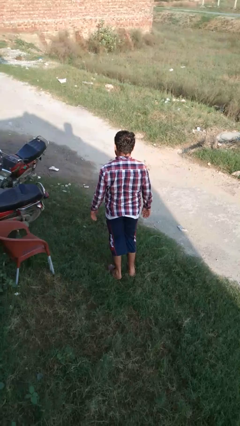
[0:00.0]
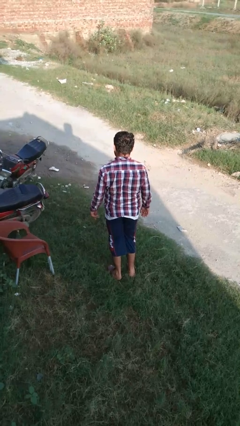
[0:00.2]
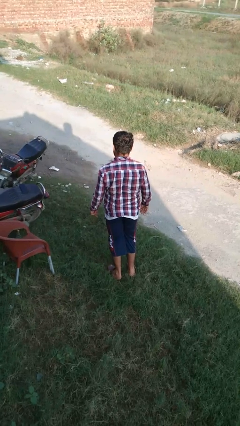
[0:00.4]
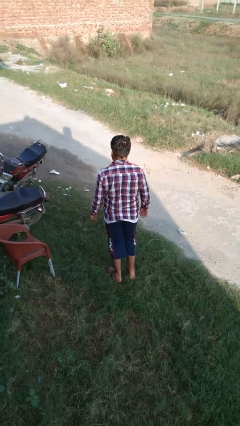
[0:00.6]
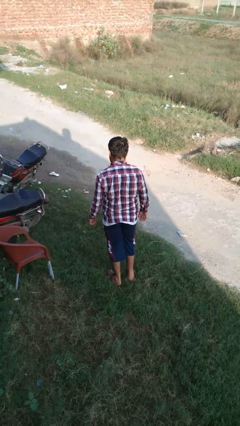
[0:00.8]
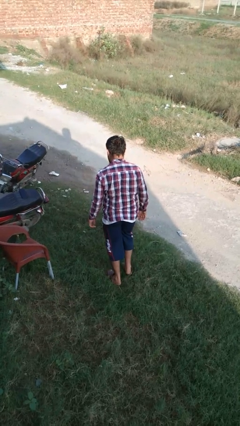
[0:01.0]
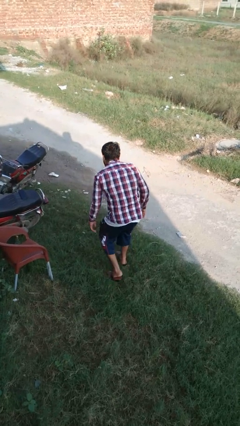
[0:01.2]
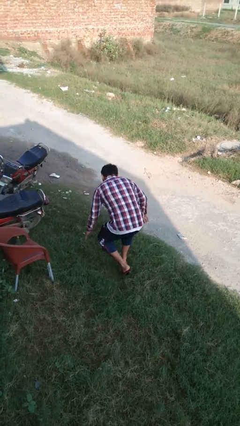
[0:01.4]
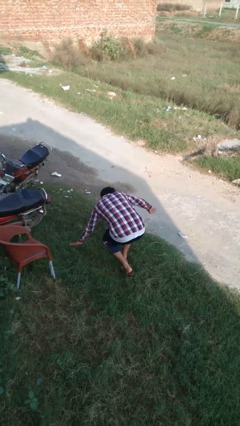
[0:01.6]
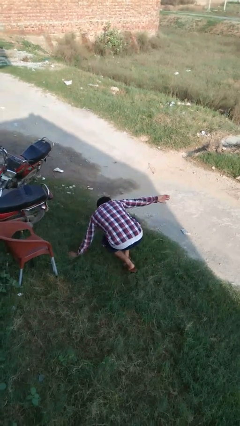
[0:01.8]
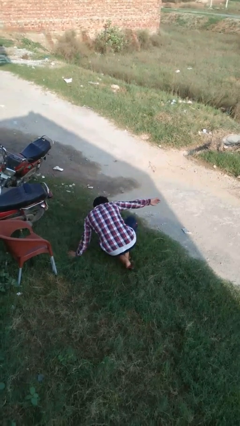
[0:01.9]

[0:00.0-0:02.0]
person trips on object on floor

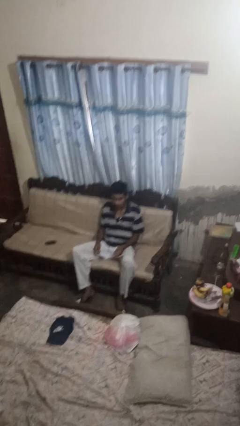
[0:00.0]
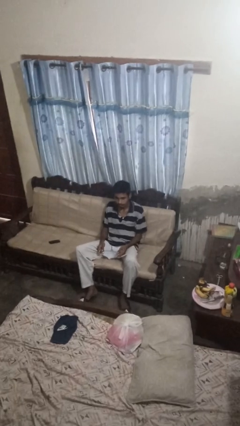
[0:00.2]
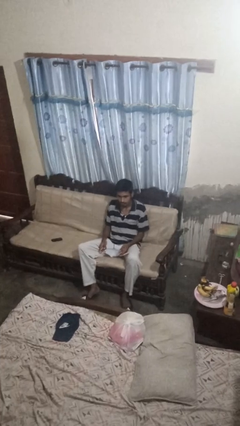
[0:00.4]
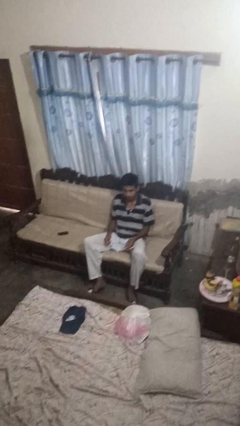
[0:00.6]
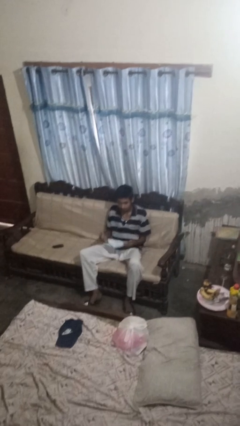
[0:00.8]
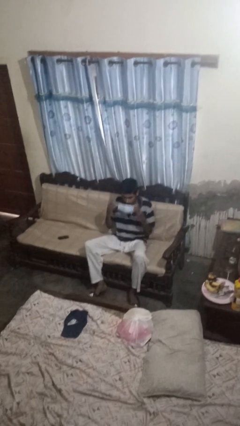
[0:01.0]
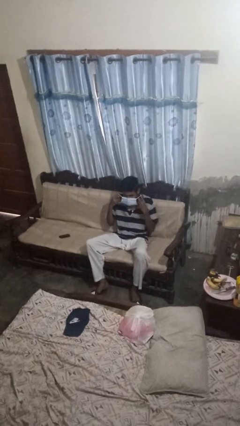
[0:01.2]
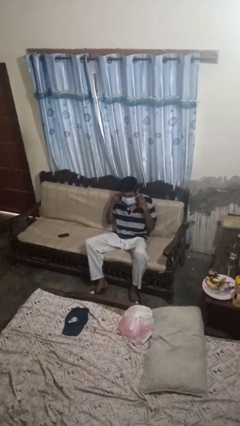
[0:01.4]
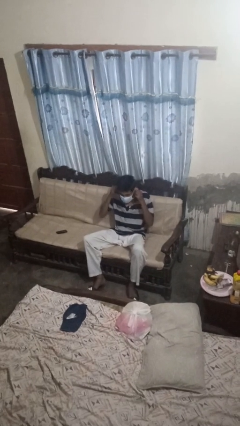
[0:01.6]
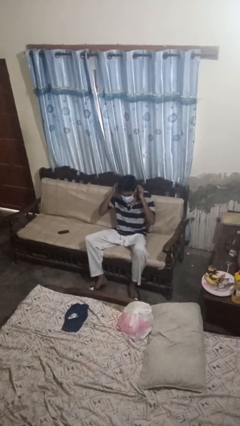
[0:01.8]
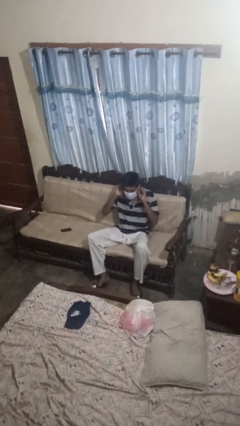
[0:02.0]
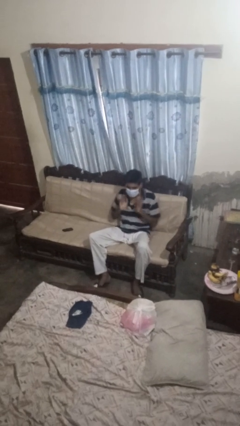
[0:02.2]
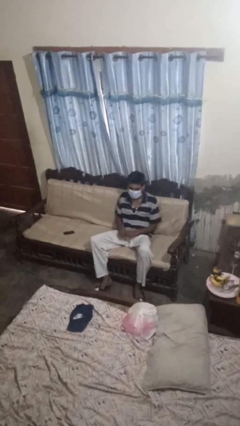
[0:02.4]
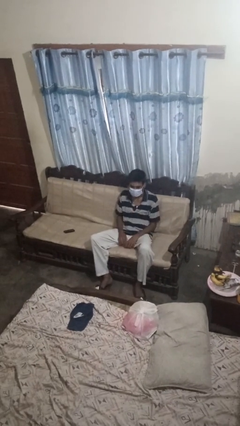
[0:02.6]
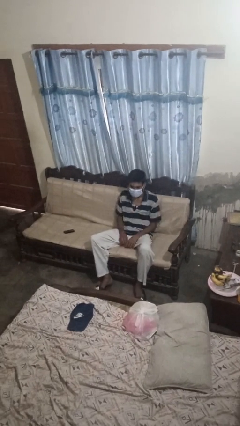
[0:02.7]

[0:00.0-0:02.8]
person puts on facemask

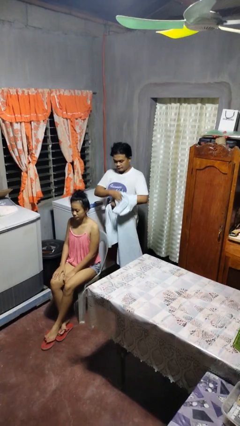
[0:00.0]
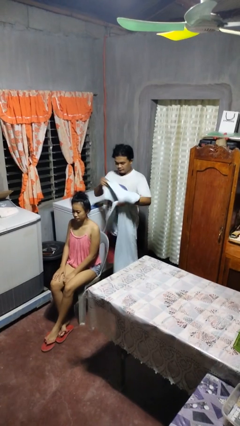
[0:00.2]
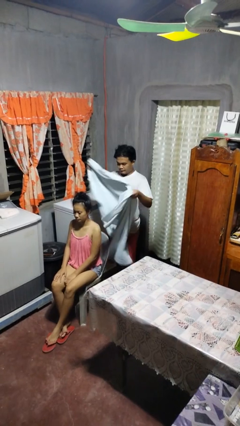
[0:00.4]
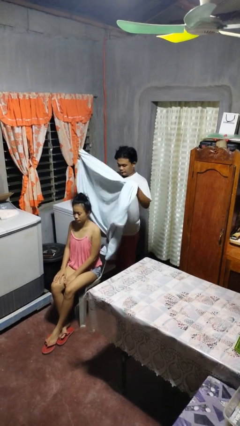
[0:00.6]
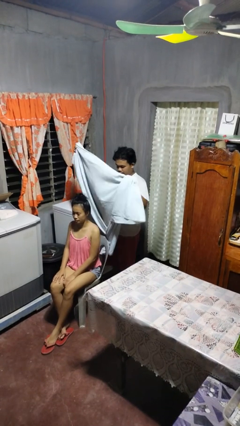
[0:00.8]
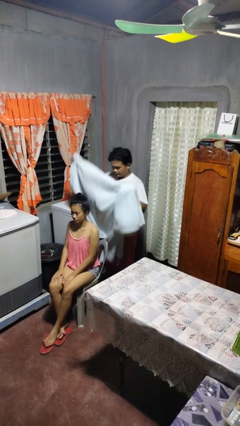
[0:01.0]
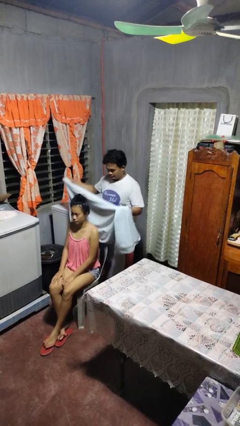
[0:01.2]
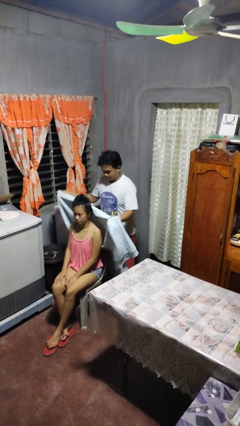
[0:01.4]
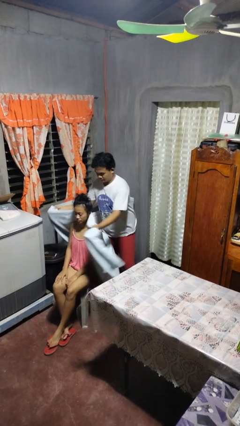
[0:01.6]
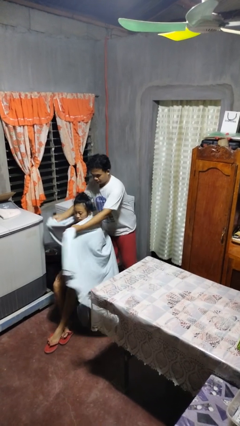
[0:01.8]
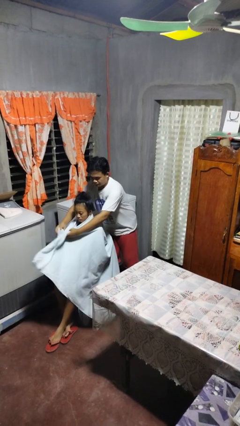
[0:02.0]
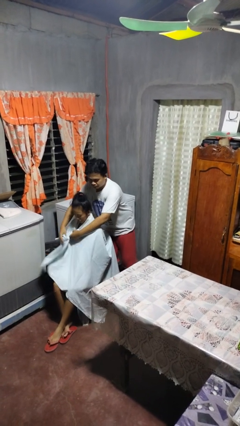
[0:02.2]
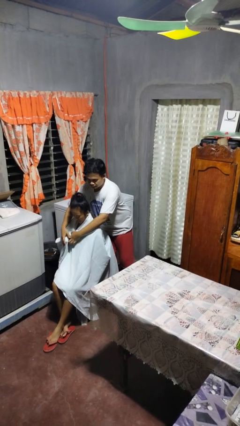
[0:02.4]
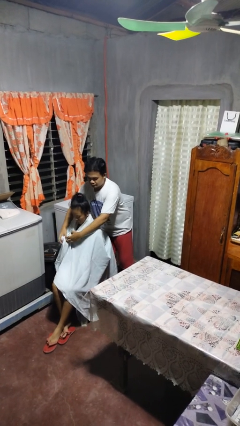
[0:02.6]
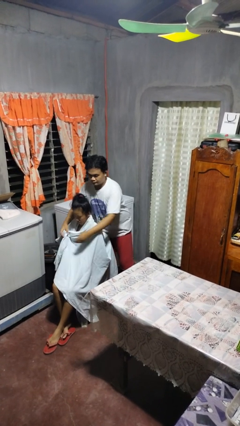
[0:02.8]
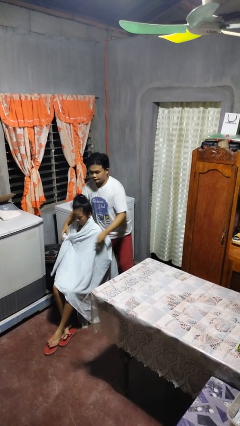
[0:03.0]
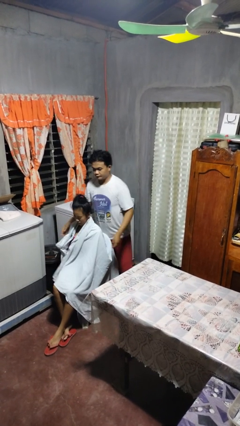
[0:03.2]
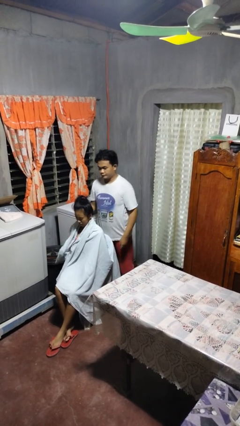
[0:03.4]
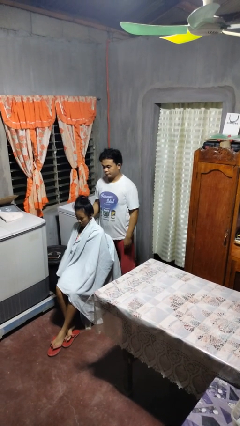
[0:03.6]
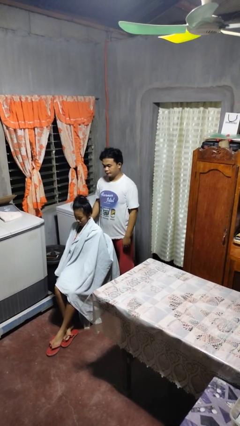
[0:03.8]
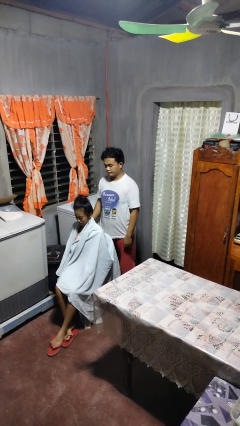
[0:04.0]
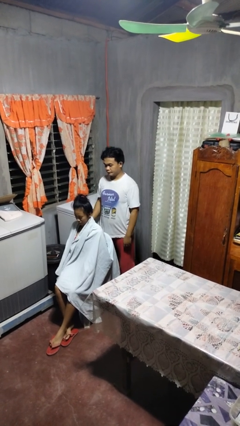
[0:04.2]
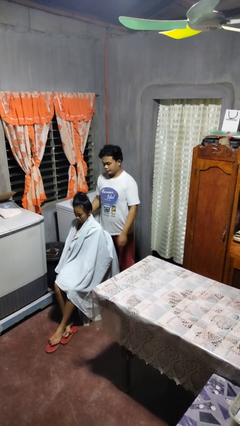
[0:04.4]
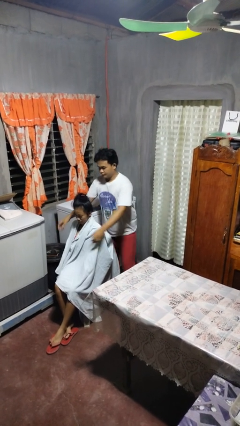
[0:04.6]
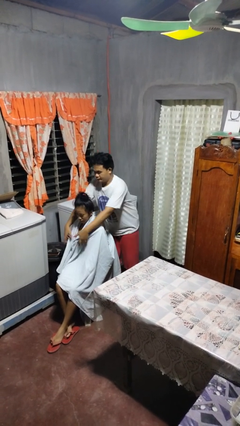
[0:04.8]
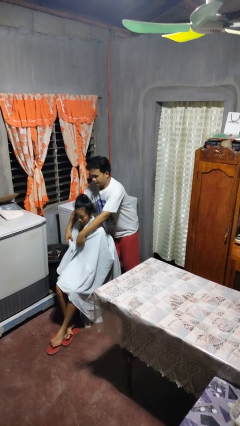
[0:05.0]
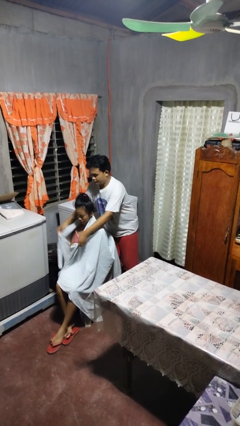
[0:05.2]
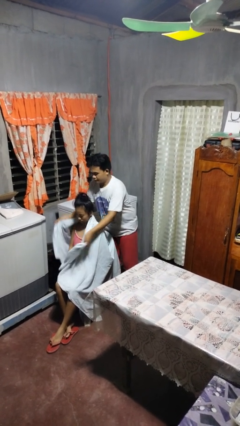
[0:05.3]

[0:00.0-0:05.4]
person covers friend with blanket

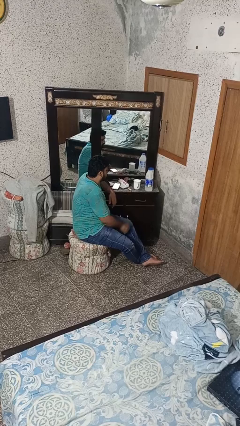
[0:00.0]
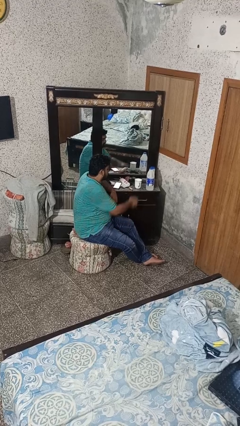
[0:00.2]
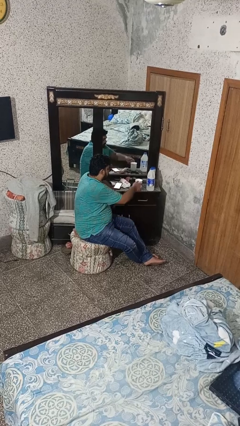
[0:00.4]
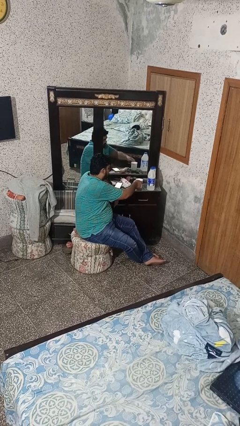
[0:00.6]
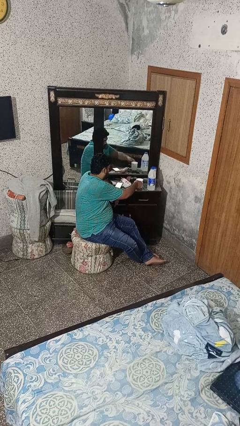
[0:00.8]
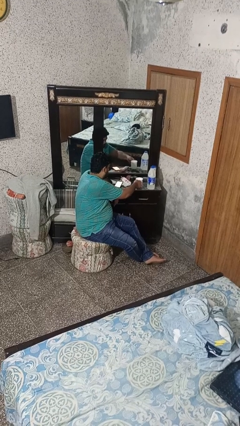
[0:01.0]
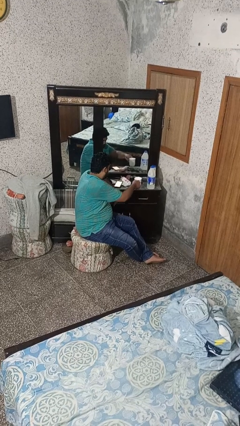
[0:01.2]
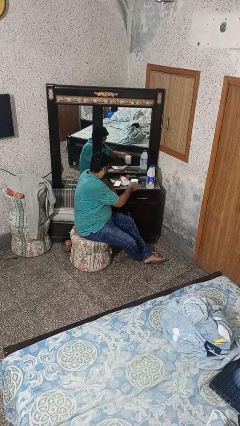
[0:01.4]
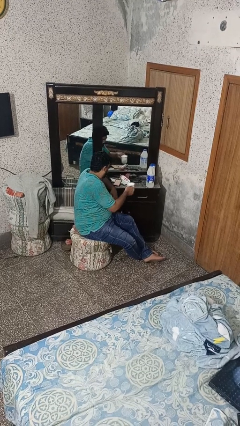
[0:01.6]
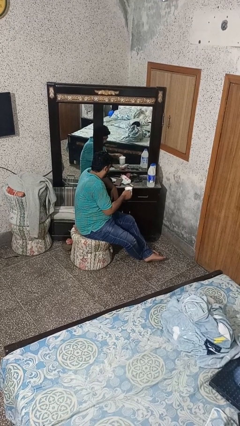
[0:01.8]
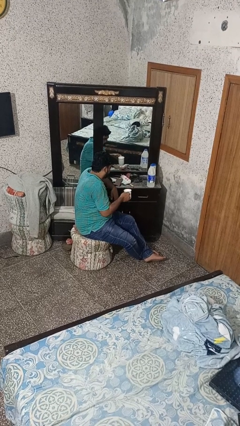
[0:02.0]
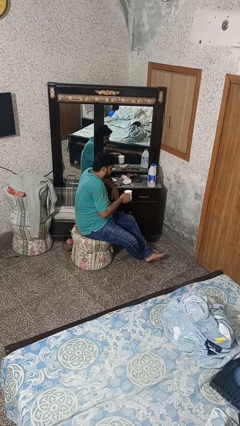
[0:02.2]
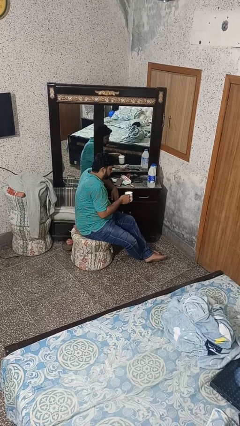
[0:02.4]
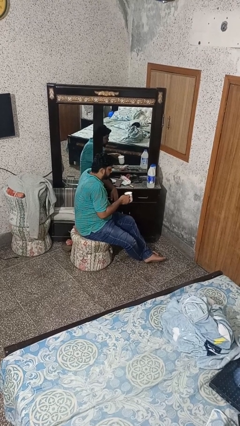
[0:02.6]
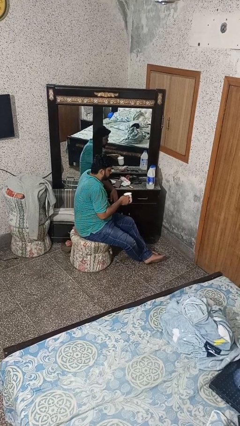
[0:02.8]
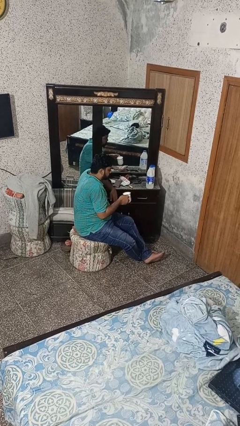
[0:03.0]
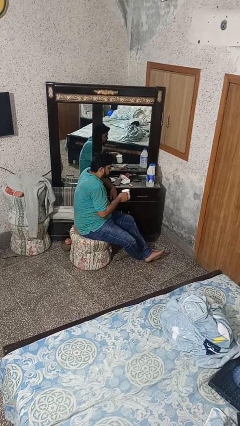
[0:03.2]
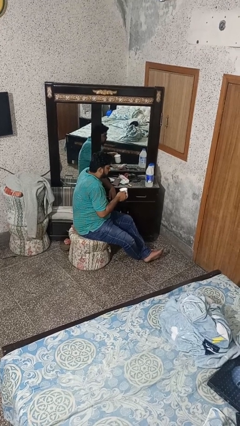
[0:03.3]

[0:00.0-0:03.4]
person picks up object from table

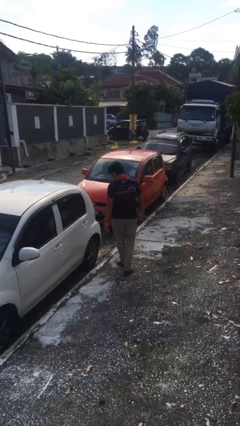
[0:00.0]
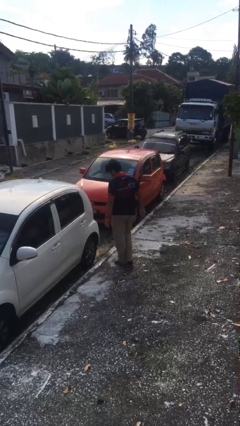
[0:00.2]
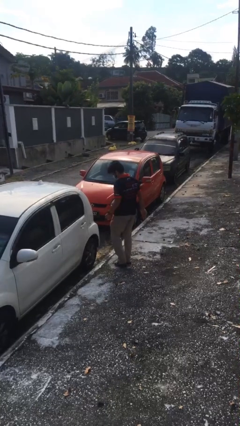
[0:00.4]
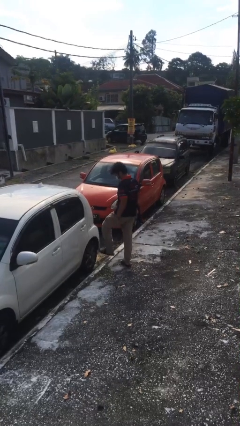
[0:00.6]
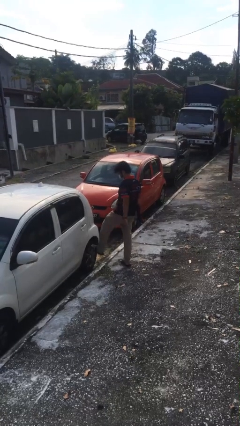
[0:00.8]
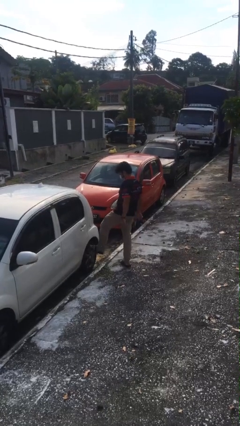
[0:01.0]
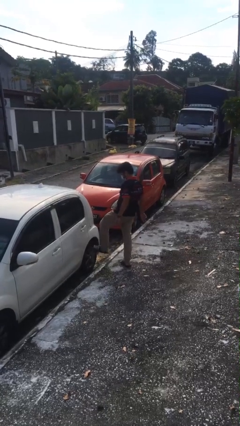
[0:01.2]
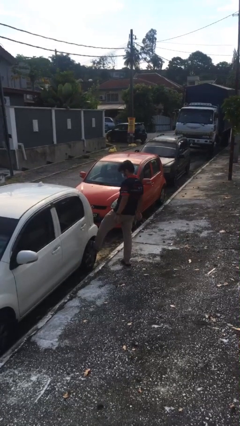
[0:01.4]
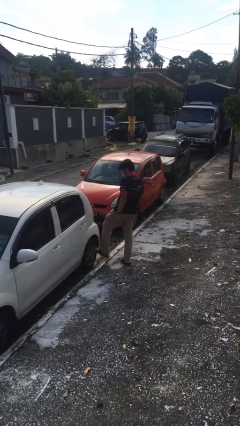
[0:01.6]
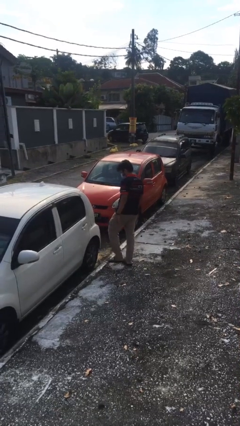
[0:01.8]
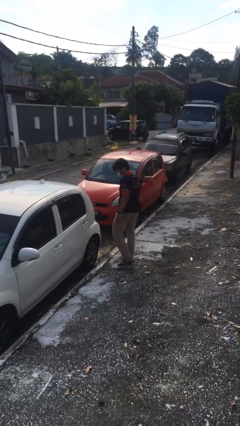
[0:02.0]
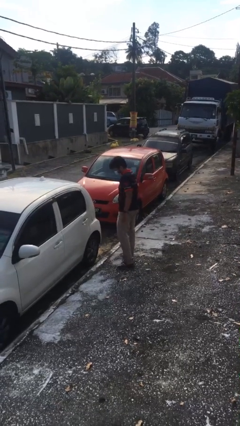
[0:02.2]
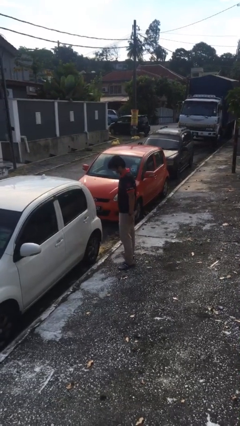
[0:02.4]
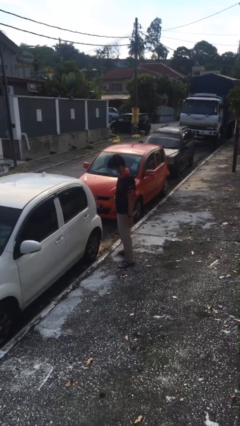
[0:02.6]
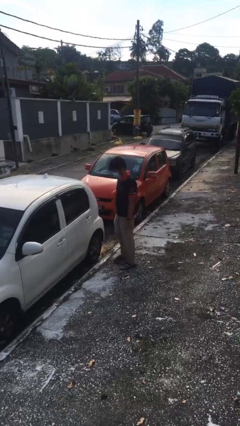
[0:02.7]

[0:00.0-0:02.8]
person kicks car tires

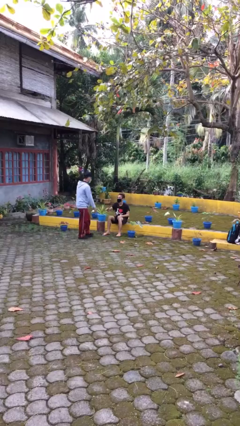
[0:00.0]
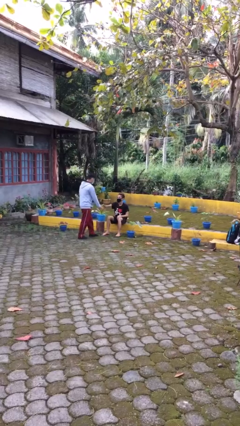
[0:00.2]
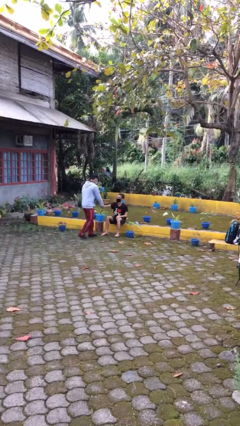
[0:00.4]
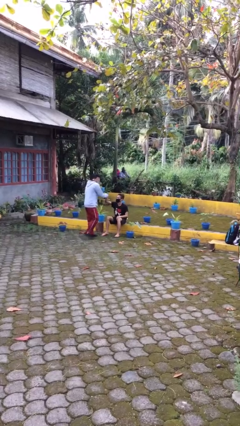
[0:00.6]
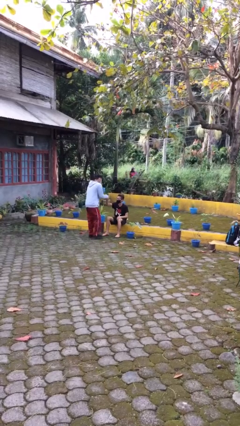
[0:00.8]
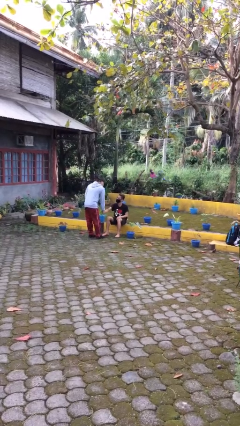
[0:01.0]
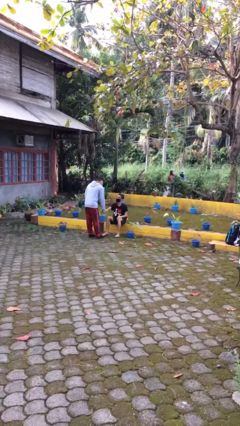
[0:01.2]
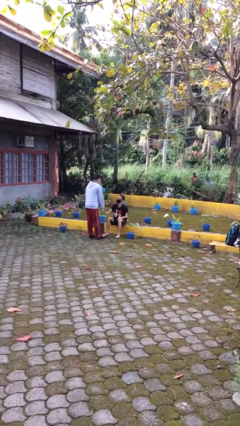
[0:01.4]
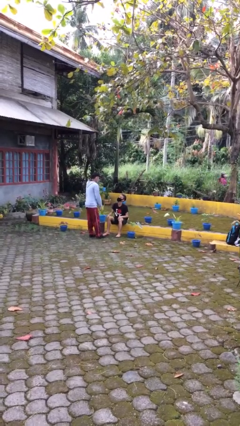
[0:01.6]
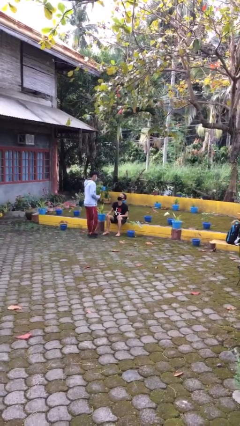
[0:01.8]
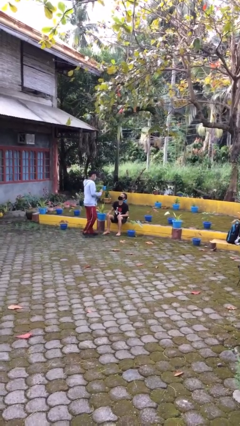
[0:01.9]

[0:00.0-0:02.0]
person shakes hand
